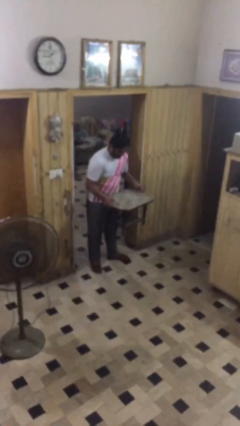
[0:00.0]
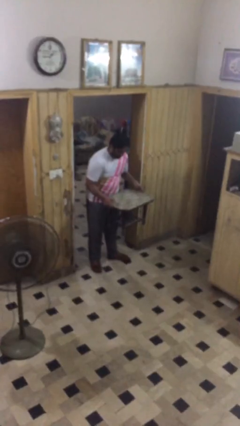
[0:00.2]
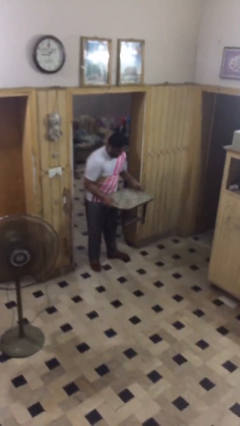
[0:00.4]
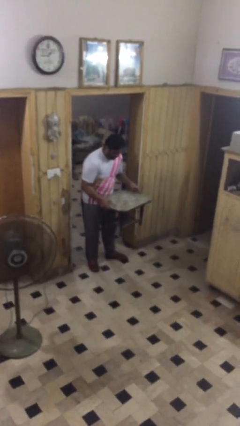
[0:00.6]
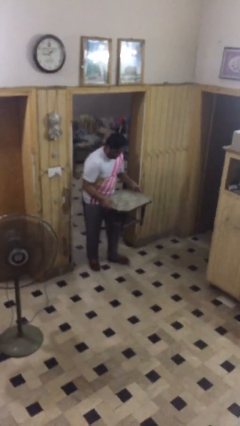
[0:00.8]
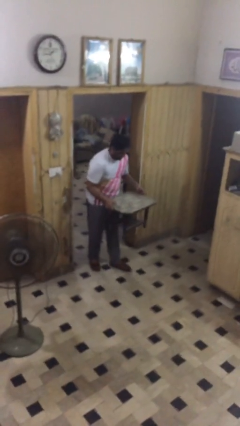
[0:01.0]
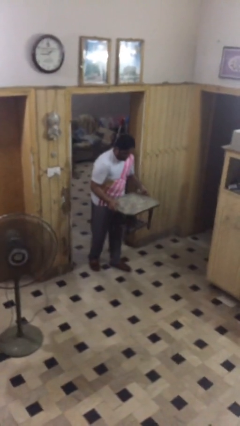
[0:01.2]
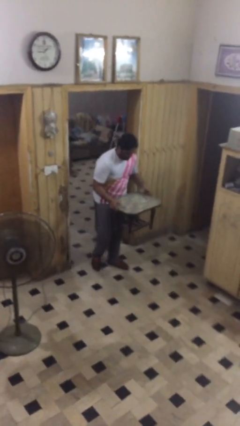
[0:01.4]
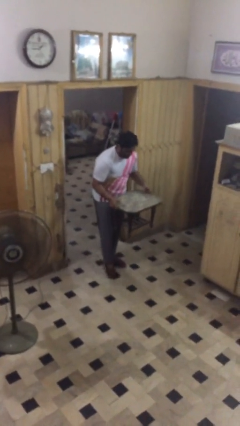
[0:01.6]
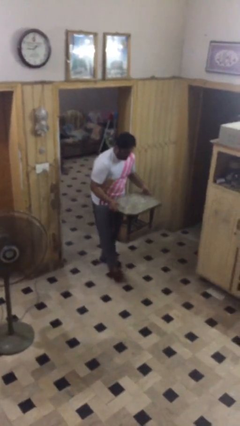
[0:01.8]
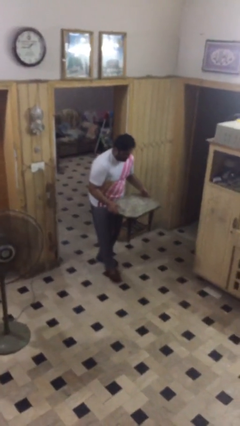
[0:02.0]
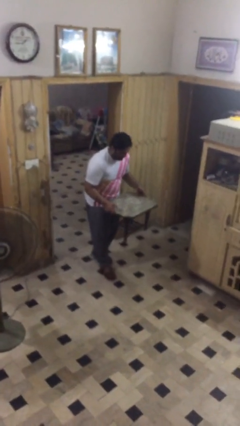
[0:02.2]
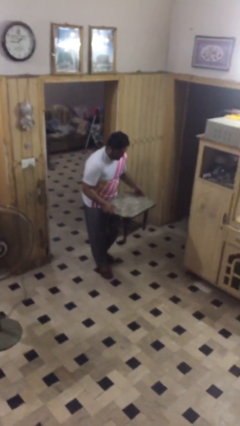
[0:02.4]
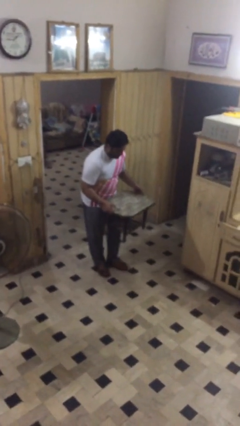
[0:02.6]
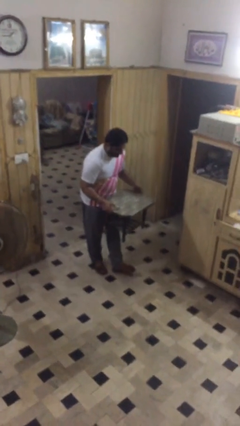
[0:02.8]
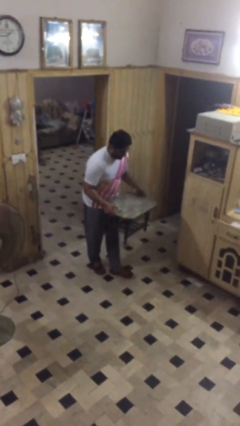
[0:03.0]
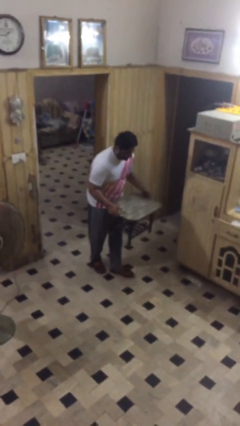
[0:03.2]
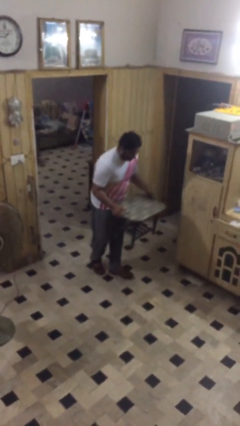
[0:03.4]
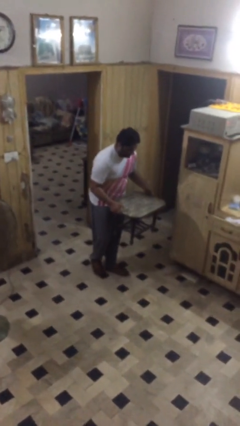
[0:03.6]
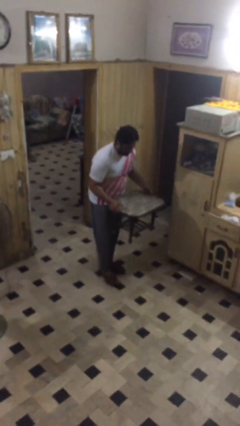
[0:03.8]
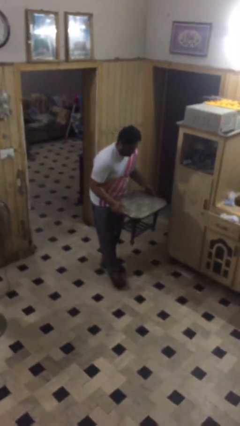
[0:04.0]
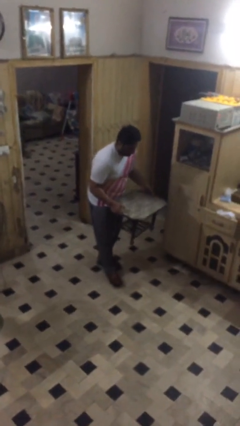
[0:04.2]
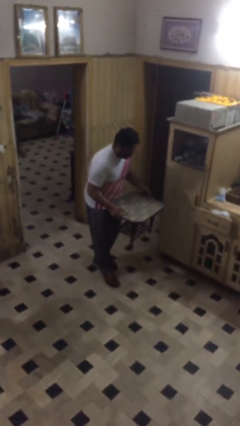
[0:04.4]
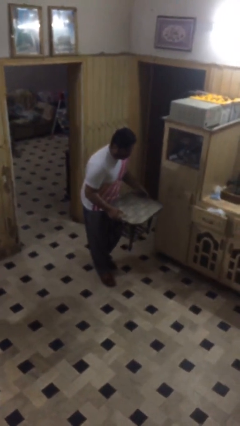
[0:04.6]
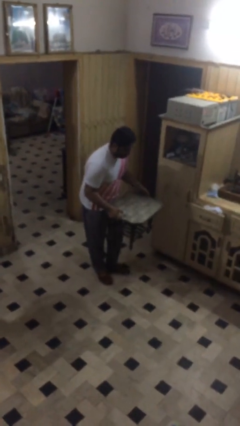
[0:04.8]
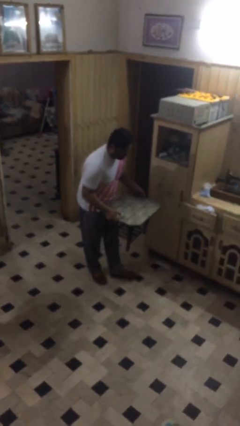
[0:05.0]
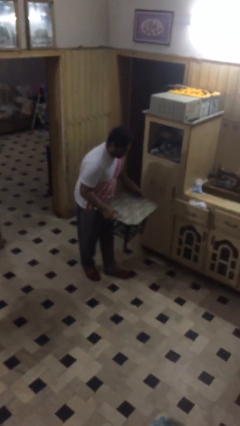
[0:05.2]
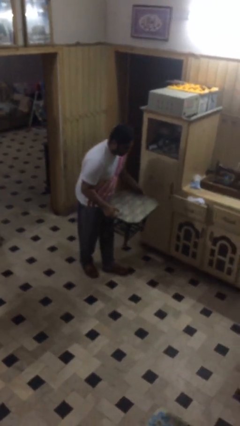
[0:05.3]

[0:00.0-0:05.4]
person carries heavy object

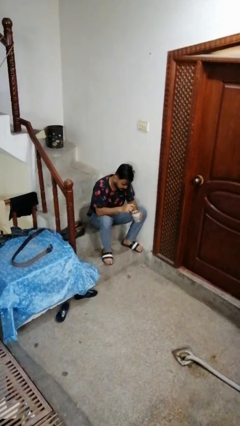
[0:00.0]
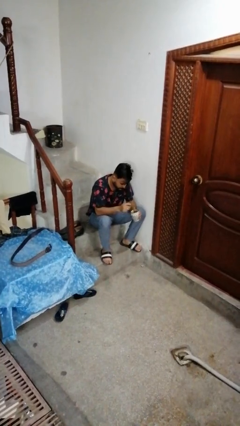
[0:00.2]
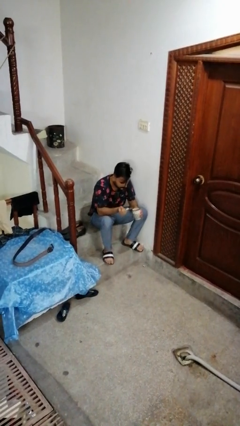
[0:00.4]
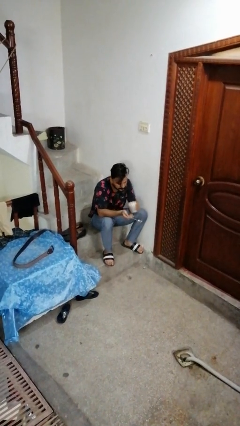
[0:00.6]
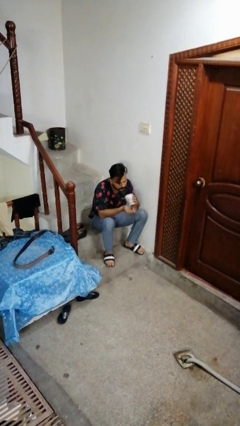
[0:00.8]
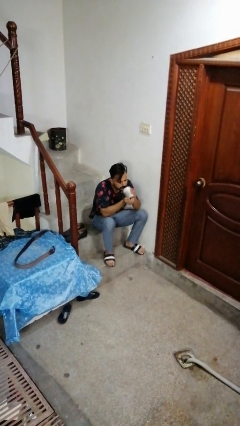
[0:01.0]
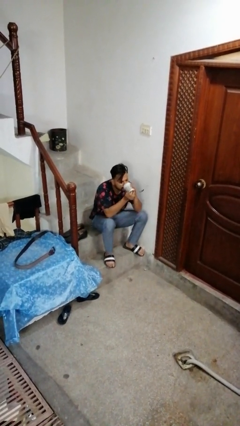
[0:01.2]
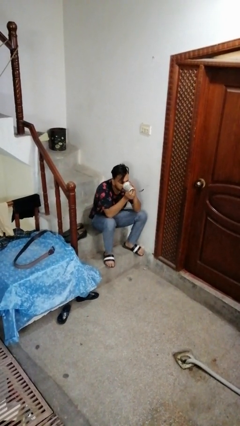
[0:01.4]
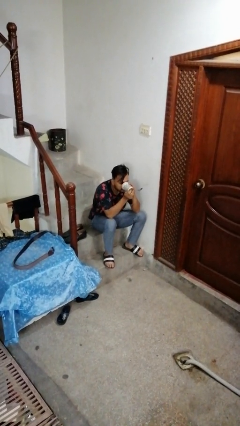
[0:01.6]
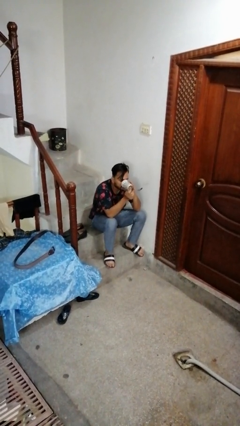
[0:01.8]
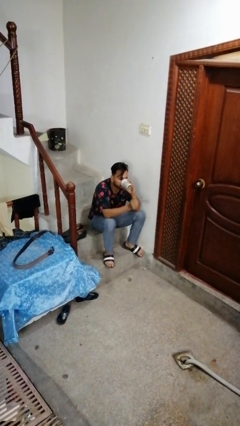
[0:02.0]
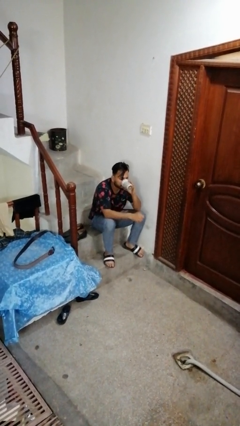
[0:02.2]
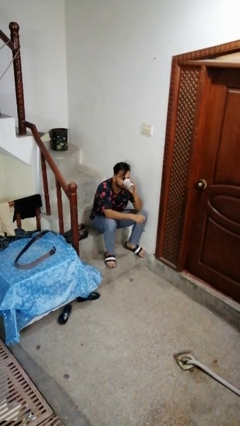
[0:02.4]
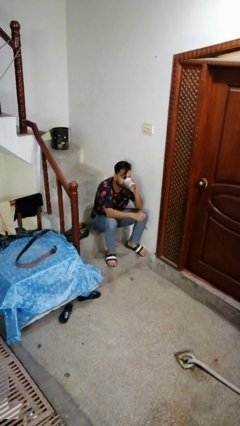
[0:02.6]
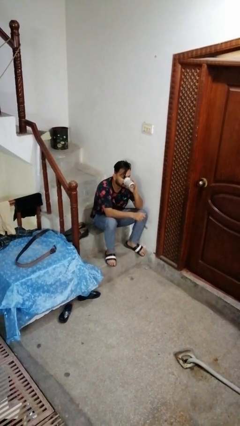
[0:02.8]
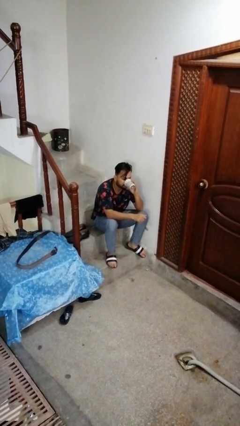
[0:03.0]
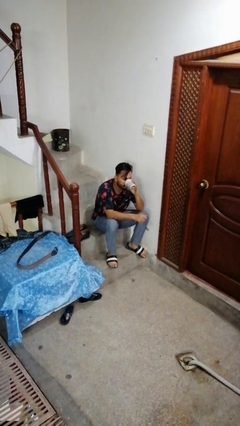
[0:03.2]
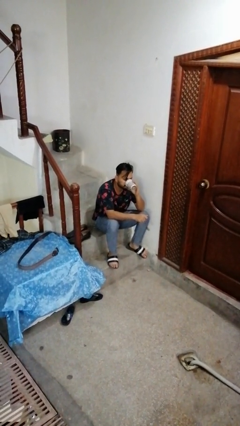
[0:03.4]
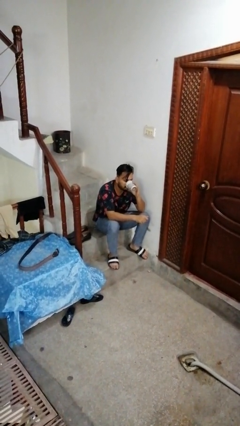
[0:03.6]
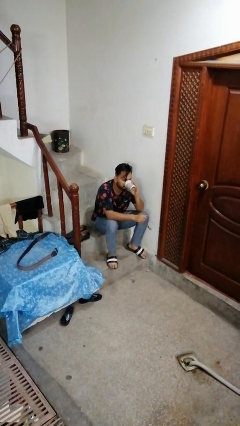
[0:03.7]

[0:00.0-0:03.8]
person drinks from mug

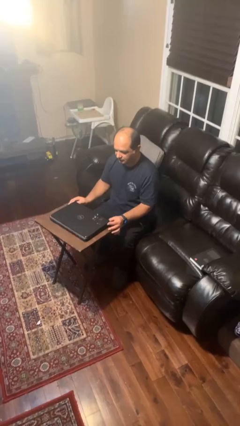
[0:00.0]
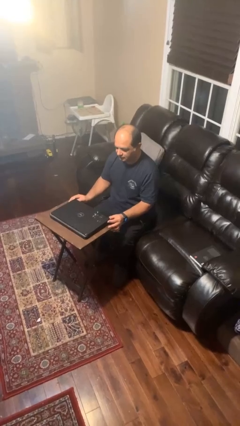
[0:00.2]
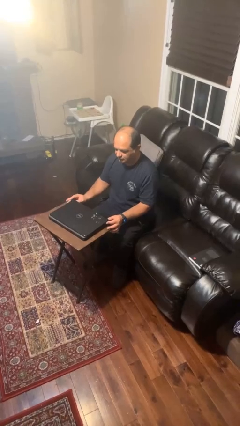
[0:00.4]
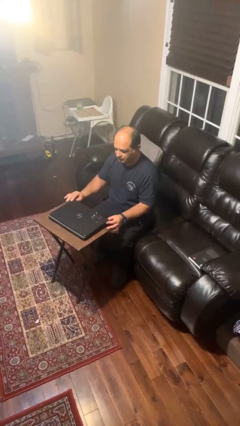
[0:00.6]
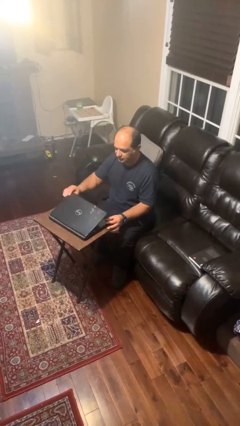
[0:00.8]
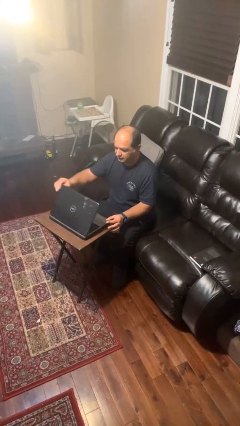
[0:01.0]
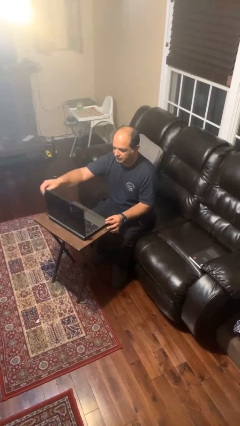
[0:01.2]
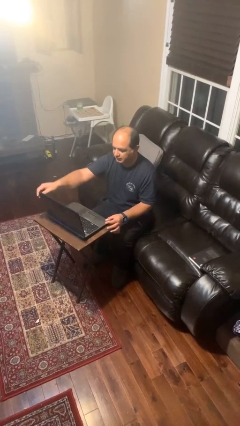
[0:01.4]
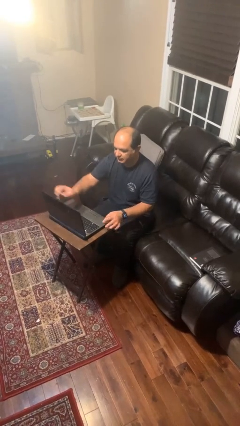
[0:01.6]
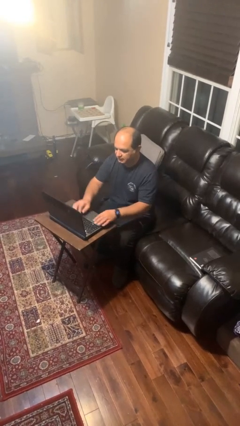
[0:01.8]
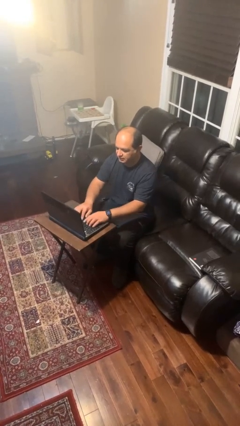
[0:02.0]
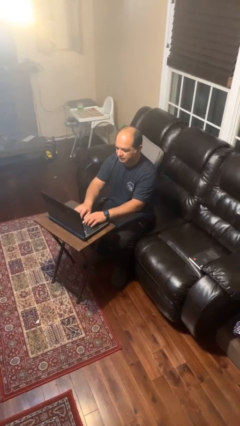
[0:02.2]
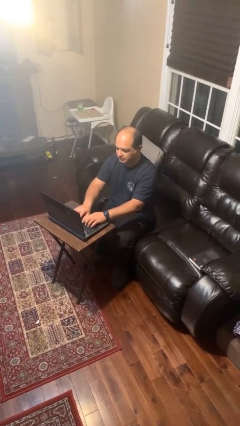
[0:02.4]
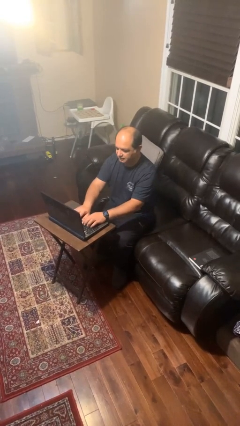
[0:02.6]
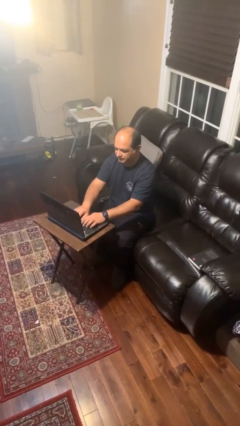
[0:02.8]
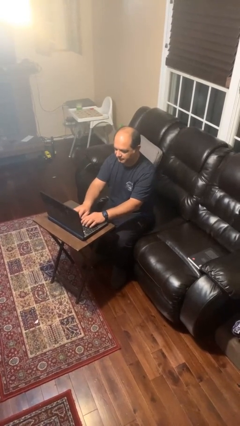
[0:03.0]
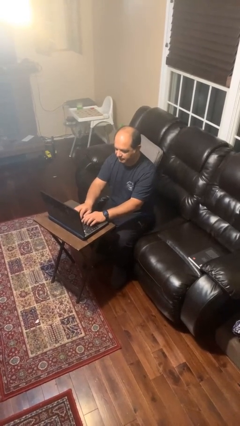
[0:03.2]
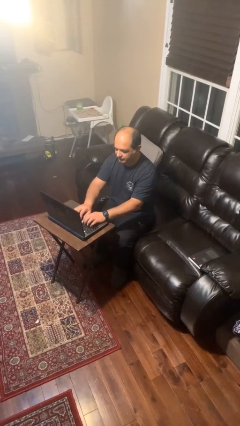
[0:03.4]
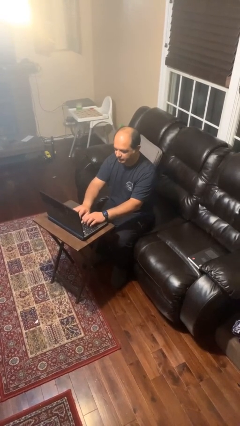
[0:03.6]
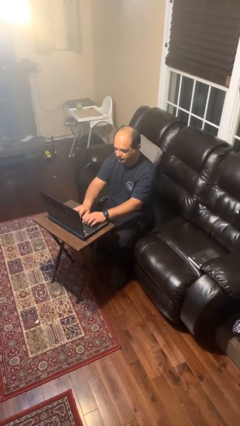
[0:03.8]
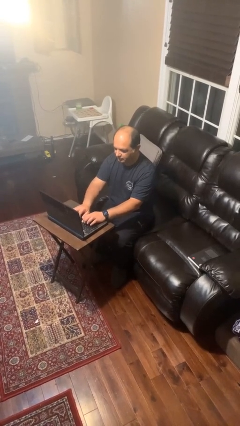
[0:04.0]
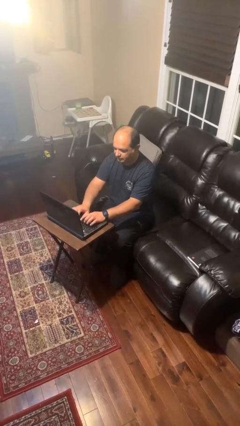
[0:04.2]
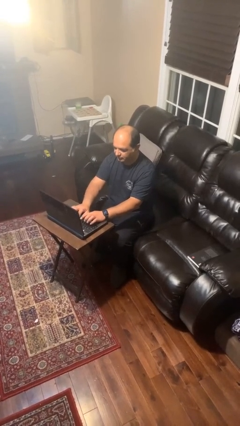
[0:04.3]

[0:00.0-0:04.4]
person interacts with laptop

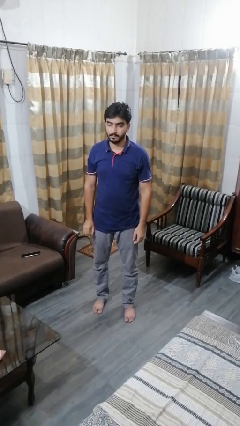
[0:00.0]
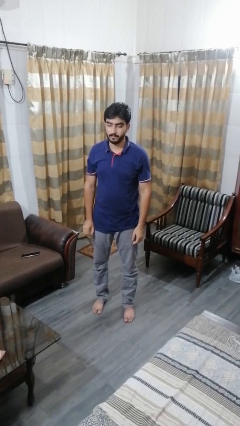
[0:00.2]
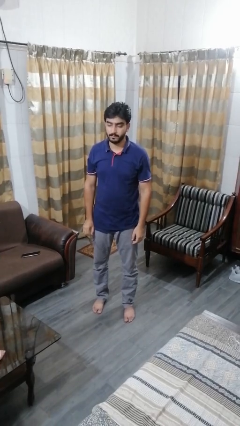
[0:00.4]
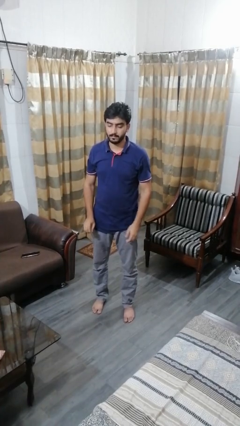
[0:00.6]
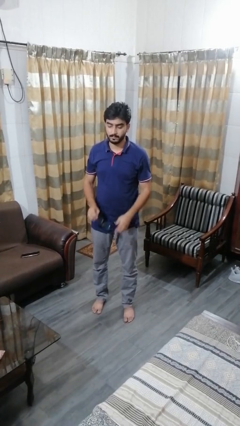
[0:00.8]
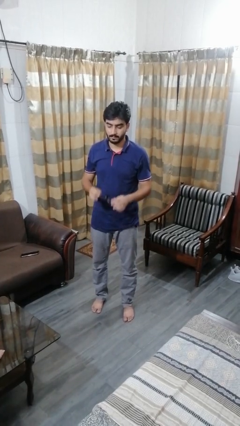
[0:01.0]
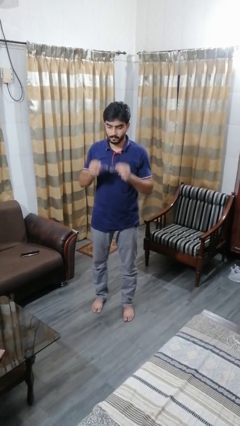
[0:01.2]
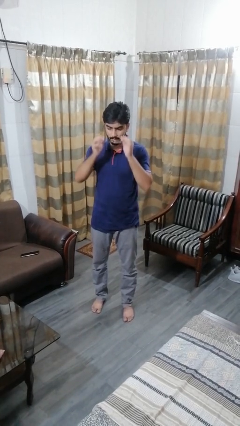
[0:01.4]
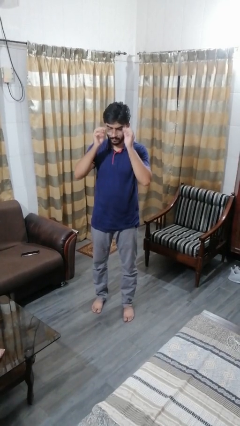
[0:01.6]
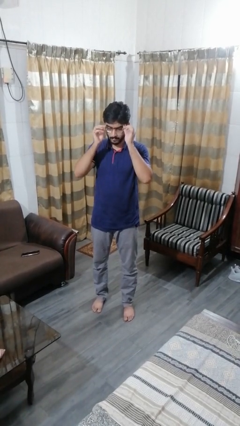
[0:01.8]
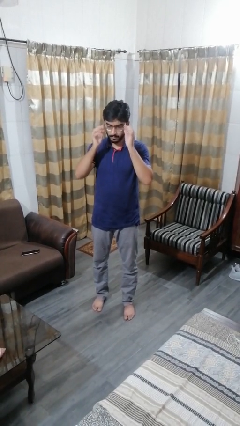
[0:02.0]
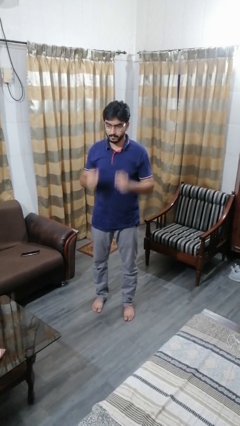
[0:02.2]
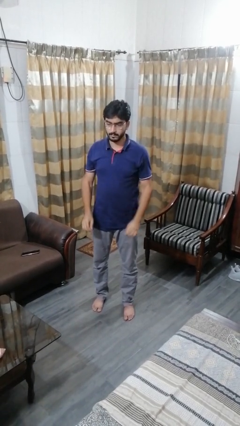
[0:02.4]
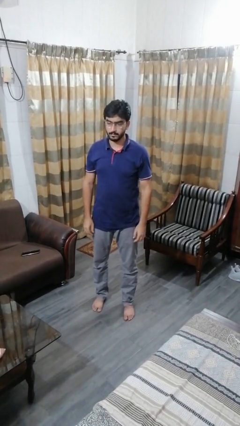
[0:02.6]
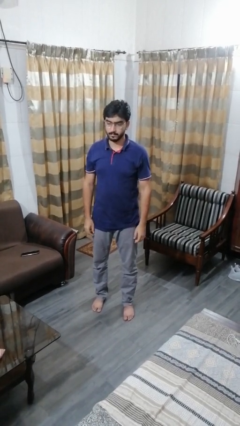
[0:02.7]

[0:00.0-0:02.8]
person puts on glasses

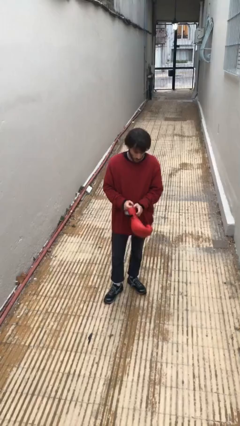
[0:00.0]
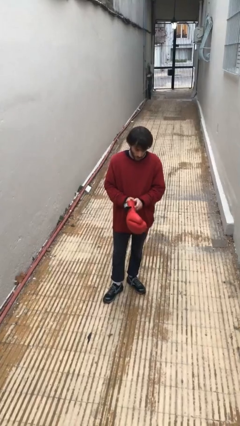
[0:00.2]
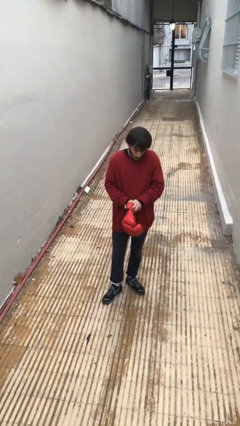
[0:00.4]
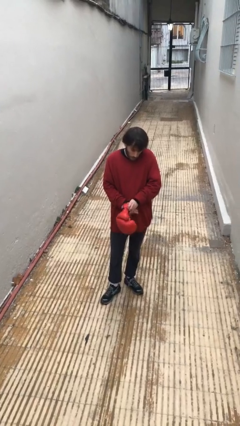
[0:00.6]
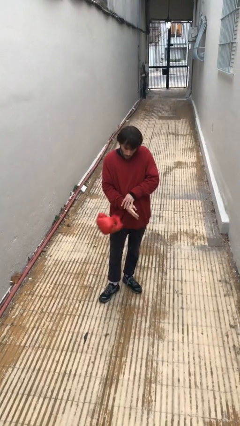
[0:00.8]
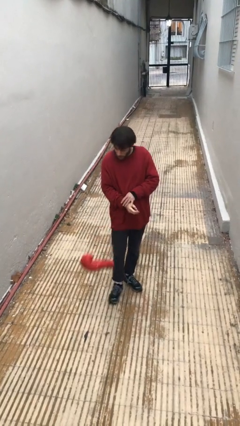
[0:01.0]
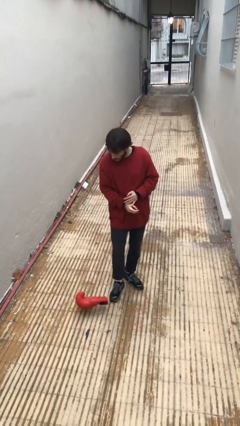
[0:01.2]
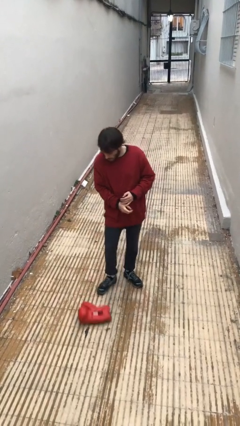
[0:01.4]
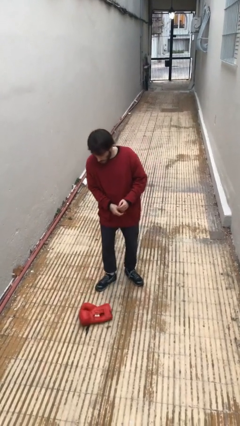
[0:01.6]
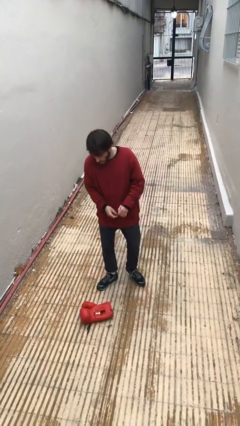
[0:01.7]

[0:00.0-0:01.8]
person drops object
